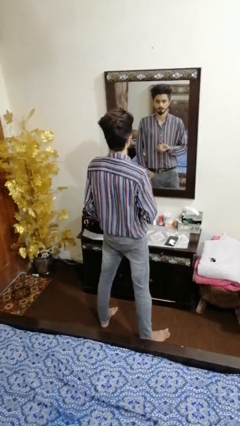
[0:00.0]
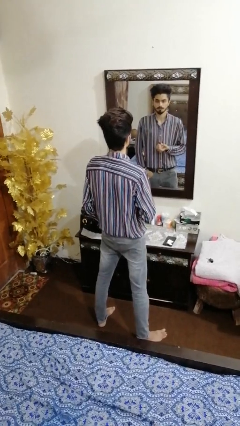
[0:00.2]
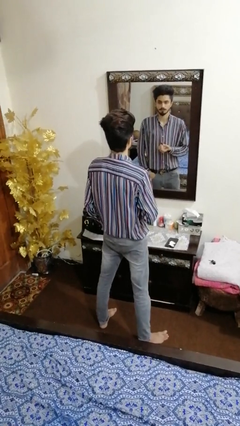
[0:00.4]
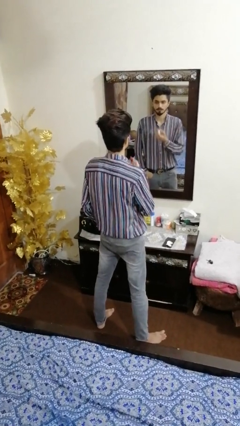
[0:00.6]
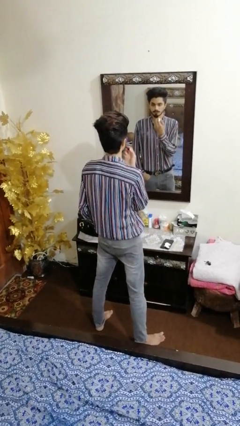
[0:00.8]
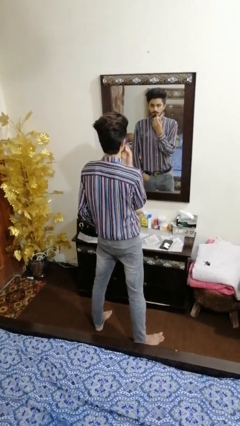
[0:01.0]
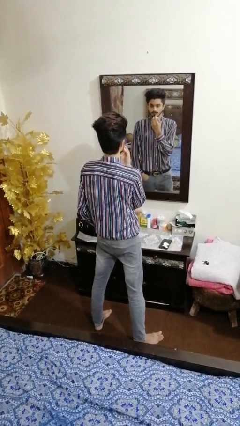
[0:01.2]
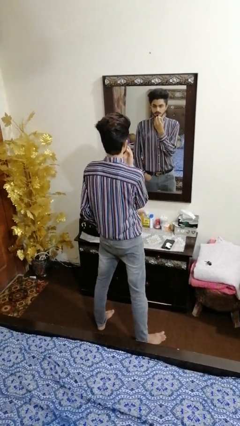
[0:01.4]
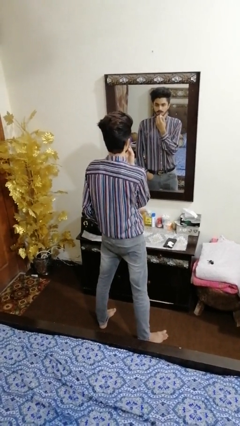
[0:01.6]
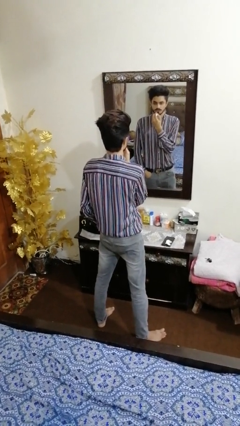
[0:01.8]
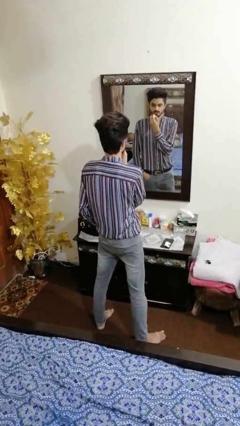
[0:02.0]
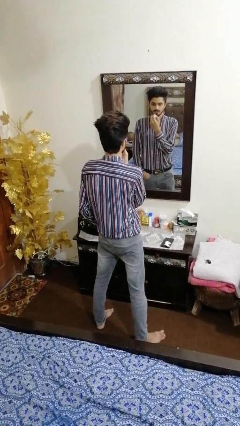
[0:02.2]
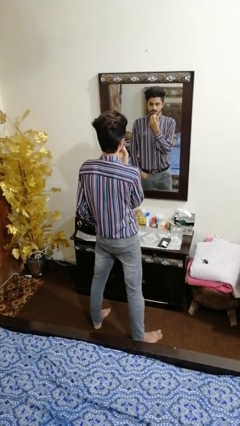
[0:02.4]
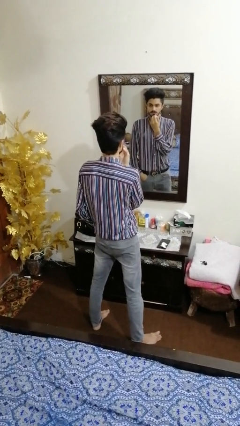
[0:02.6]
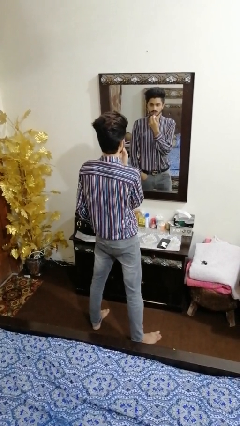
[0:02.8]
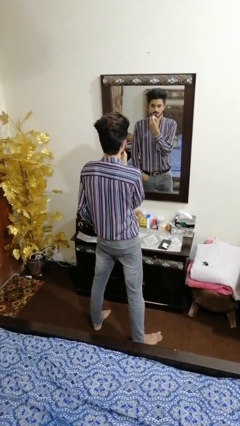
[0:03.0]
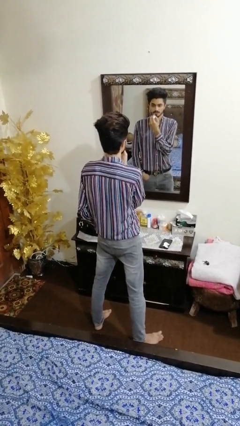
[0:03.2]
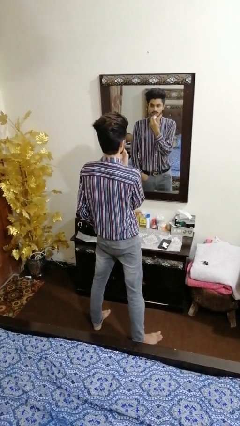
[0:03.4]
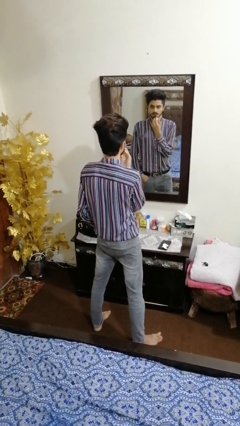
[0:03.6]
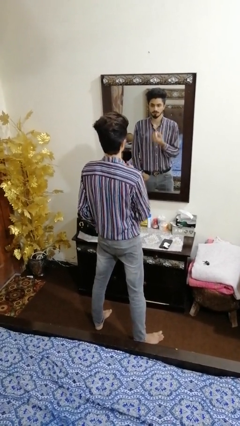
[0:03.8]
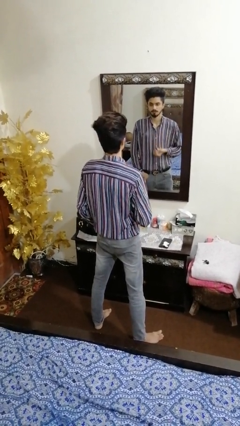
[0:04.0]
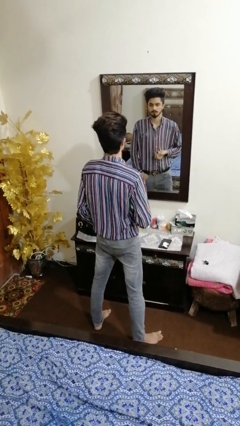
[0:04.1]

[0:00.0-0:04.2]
person applies lip makeup

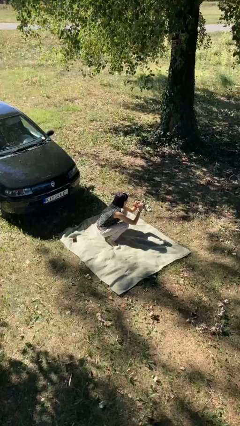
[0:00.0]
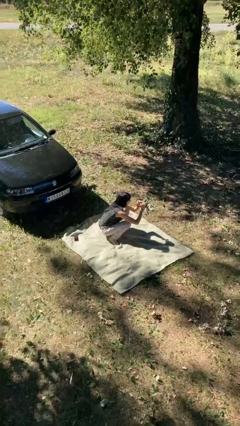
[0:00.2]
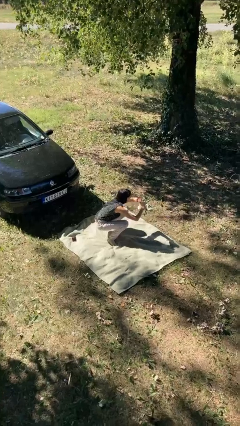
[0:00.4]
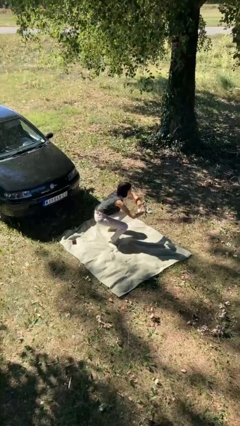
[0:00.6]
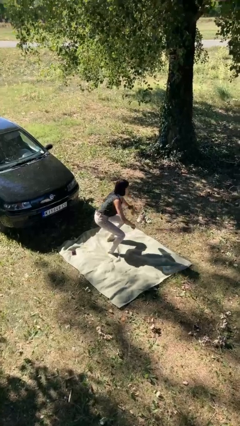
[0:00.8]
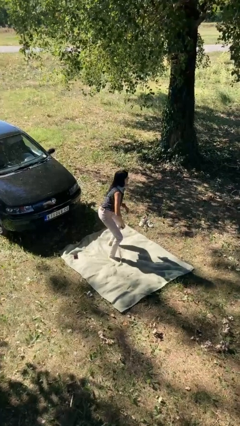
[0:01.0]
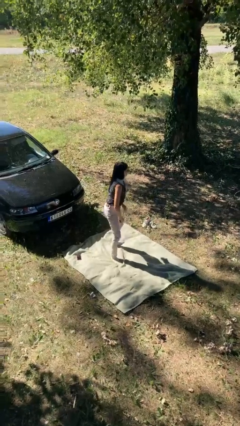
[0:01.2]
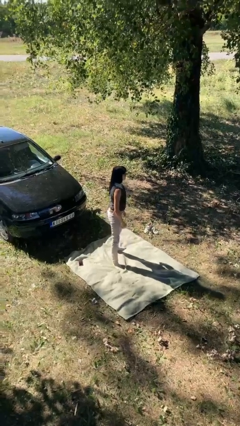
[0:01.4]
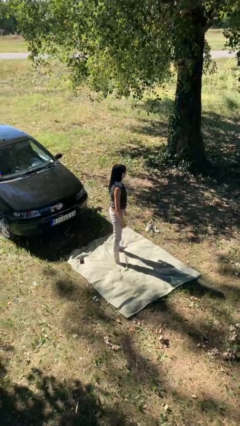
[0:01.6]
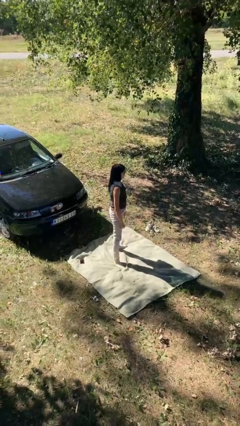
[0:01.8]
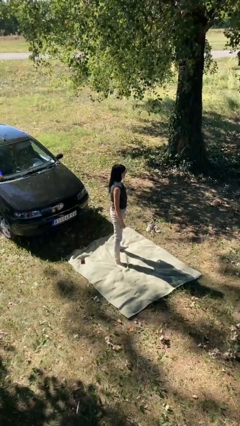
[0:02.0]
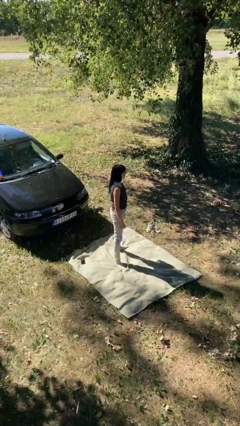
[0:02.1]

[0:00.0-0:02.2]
person stands up

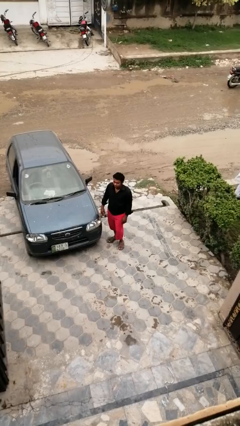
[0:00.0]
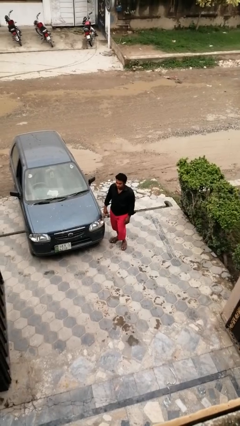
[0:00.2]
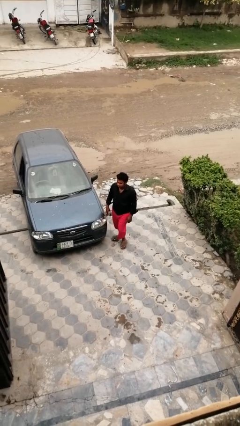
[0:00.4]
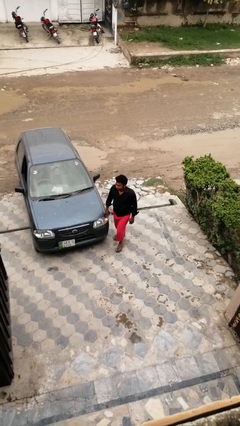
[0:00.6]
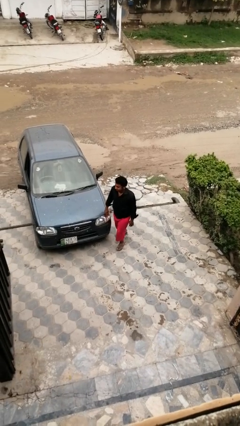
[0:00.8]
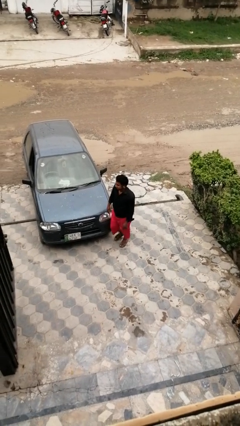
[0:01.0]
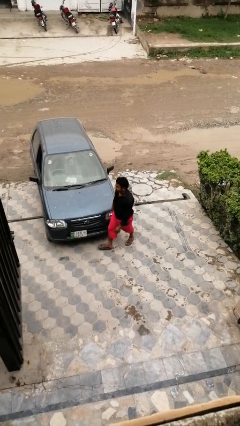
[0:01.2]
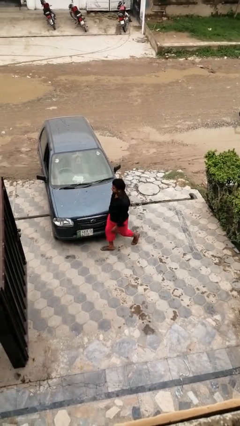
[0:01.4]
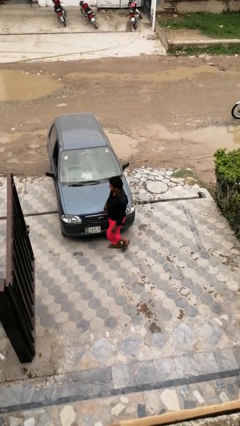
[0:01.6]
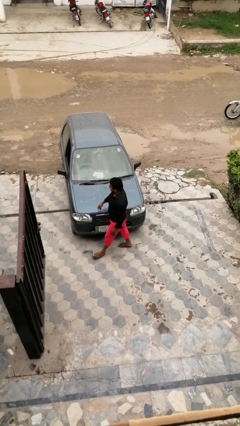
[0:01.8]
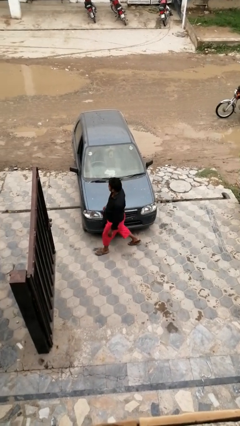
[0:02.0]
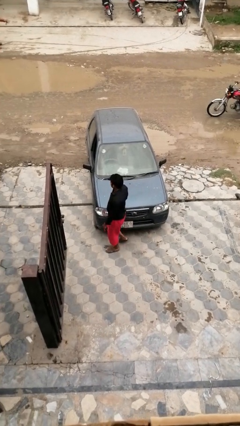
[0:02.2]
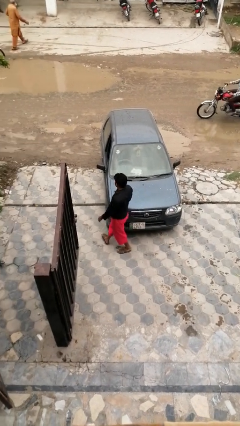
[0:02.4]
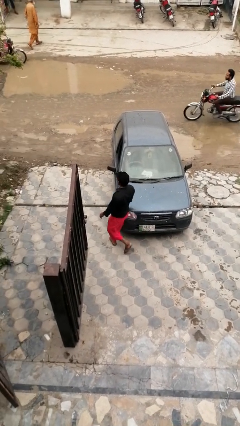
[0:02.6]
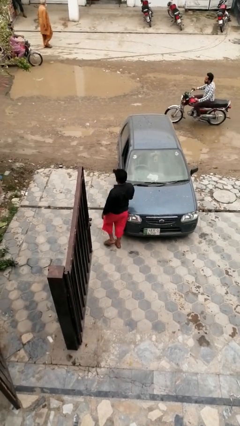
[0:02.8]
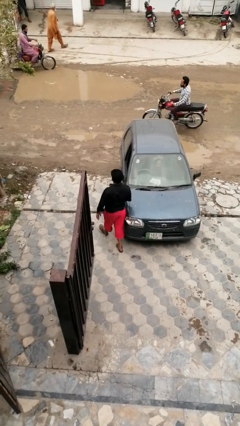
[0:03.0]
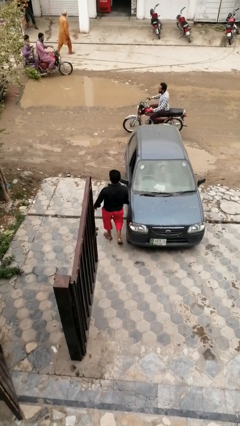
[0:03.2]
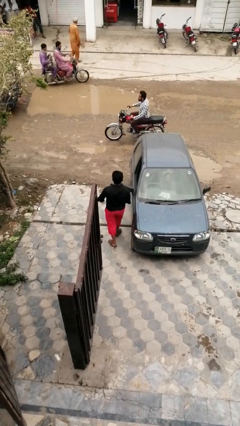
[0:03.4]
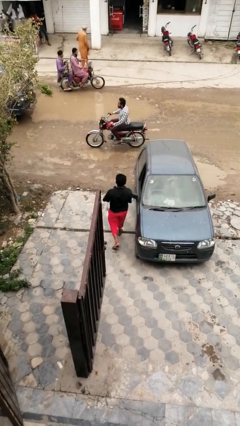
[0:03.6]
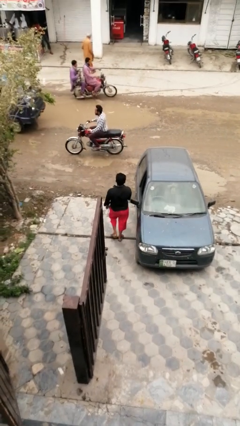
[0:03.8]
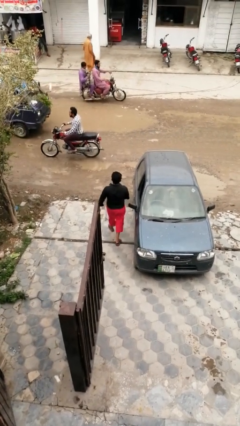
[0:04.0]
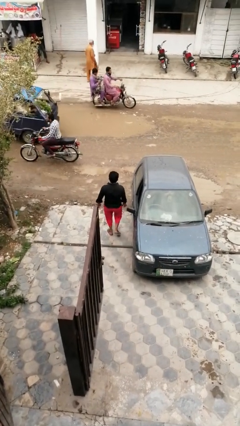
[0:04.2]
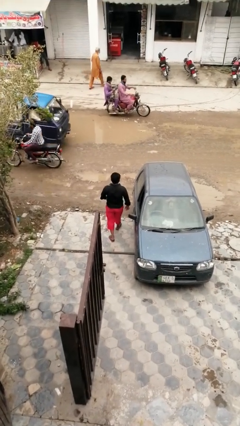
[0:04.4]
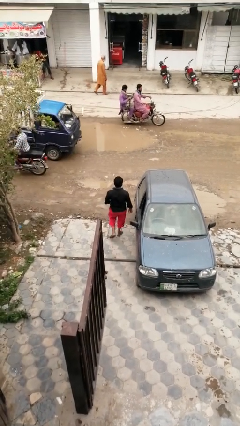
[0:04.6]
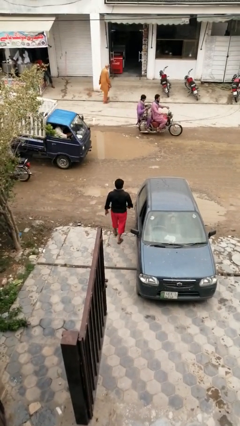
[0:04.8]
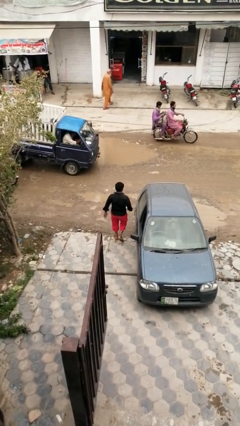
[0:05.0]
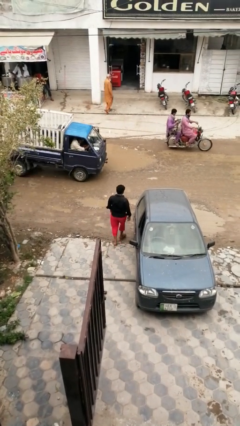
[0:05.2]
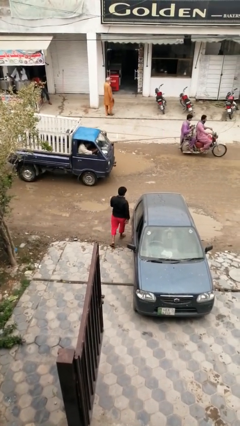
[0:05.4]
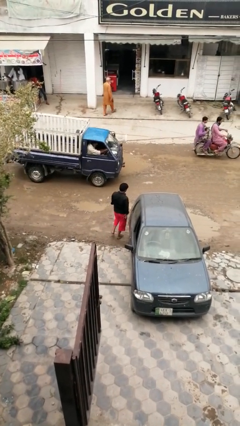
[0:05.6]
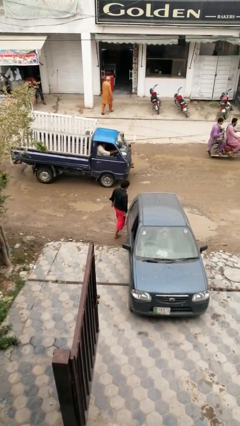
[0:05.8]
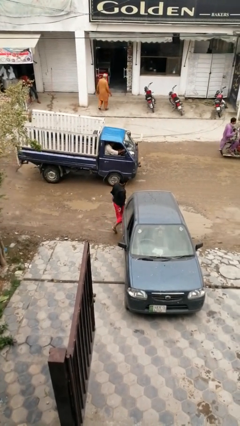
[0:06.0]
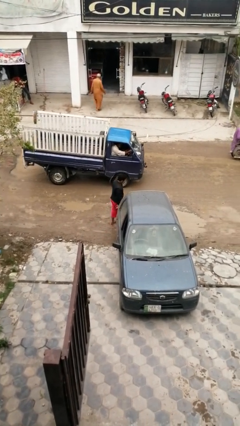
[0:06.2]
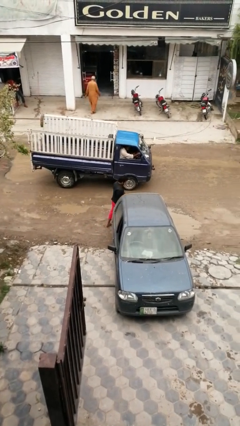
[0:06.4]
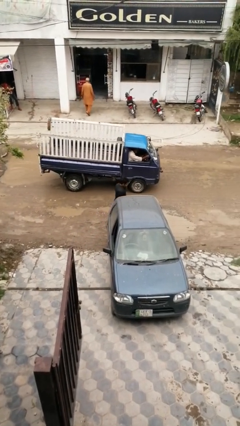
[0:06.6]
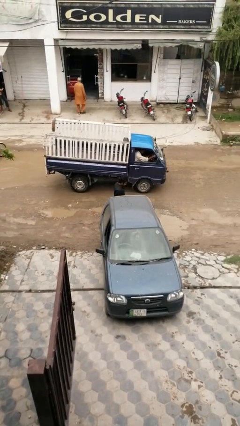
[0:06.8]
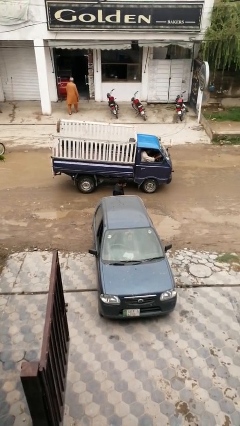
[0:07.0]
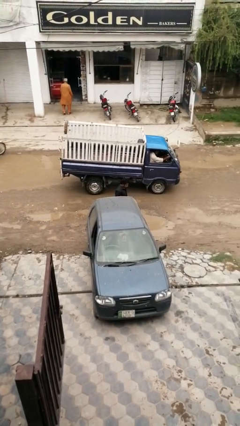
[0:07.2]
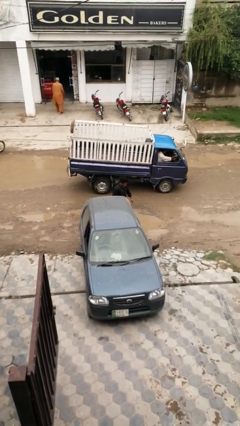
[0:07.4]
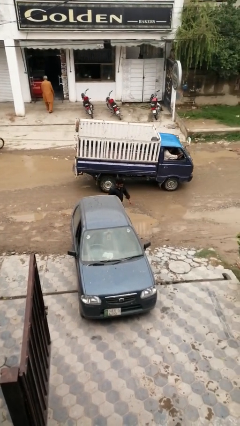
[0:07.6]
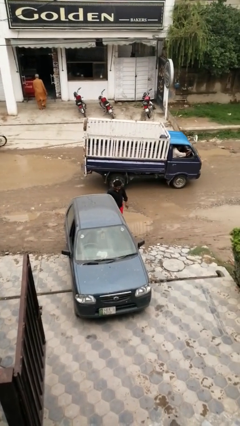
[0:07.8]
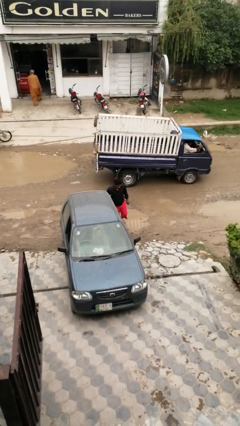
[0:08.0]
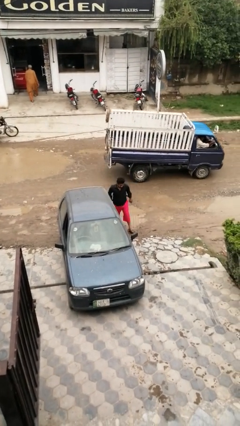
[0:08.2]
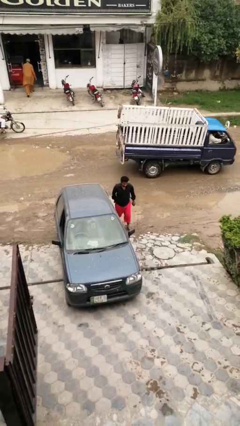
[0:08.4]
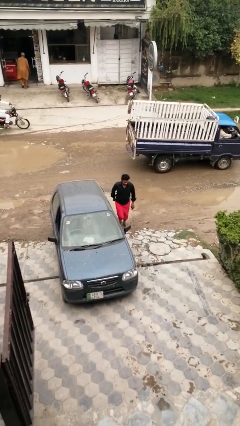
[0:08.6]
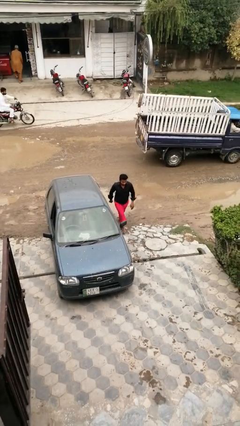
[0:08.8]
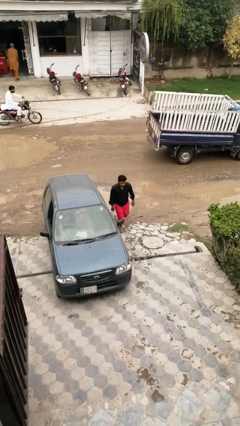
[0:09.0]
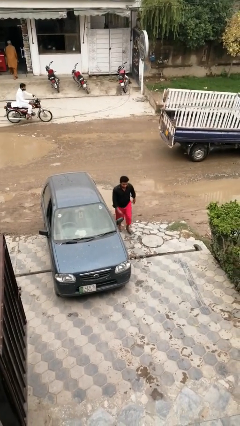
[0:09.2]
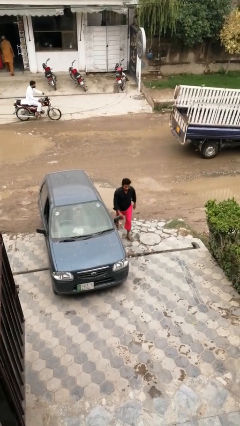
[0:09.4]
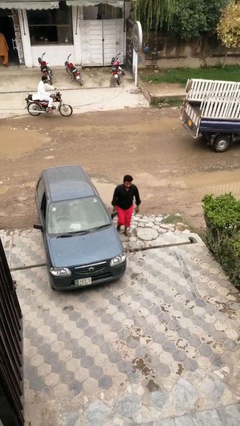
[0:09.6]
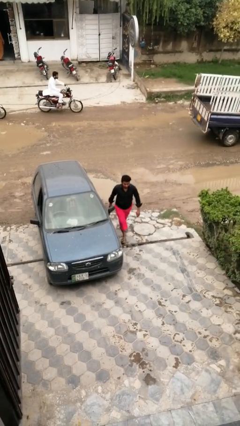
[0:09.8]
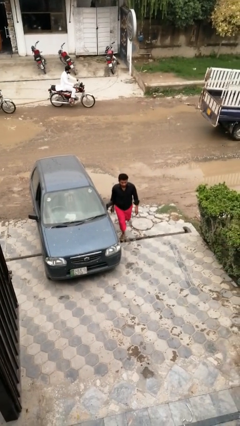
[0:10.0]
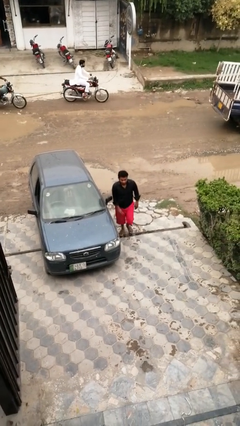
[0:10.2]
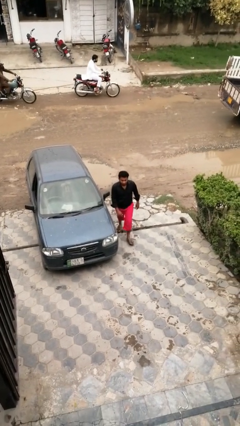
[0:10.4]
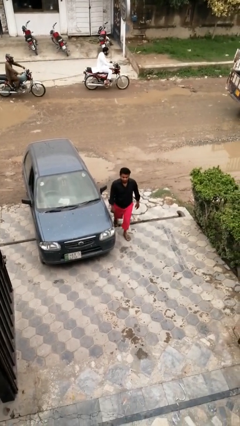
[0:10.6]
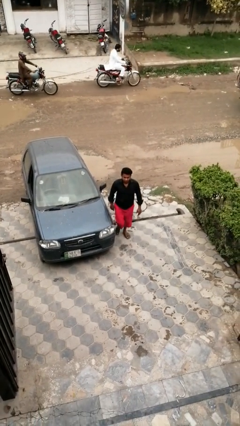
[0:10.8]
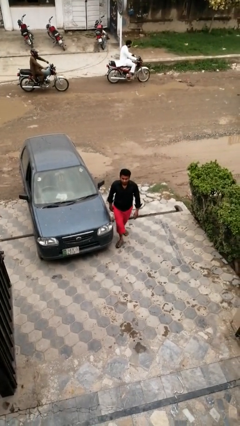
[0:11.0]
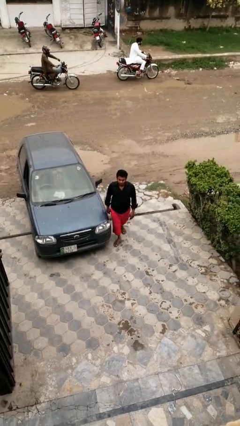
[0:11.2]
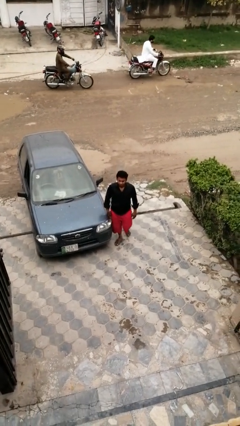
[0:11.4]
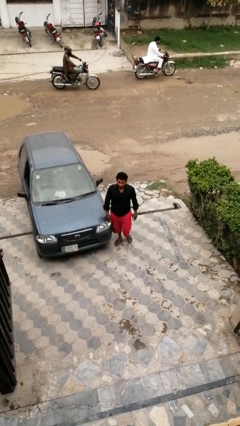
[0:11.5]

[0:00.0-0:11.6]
person walks around car
